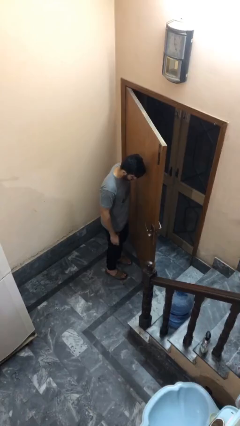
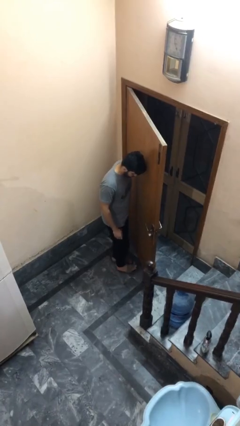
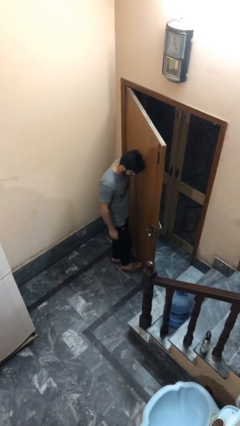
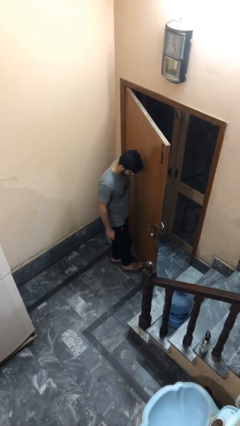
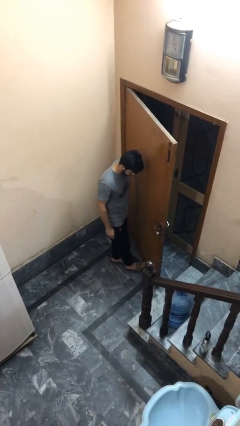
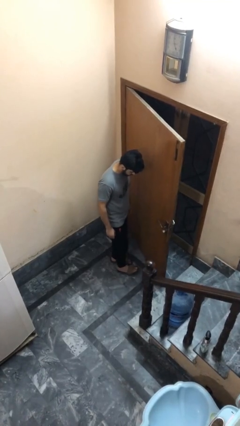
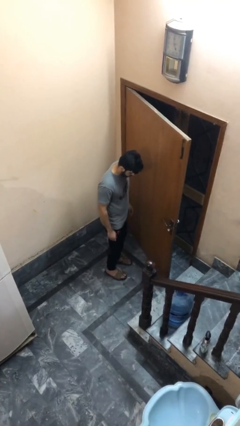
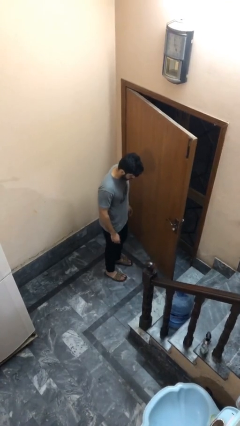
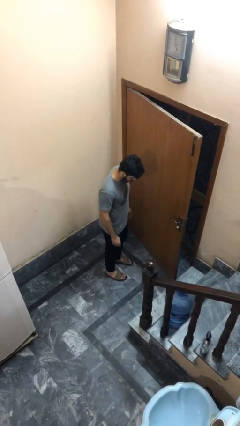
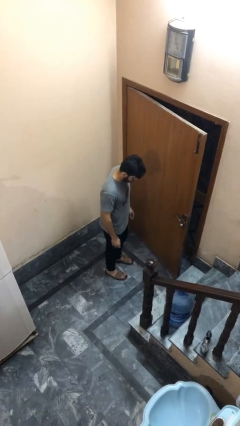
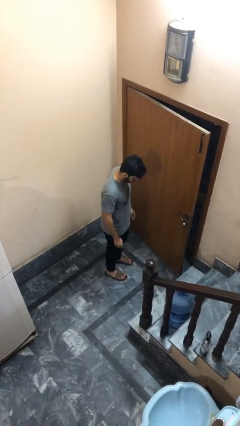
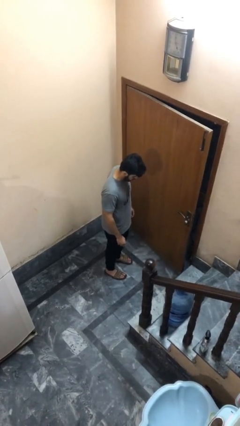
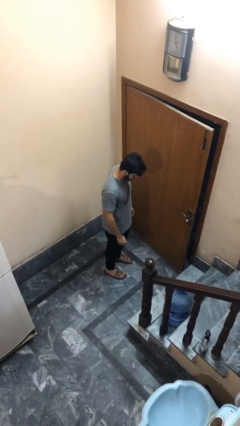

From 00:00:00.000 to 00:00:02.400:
person closes door with foot

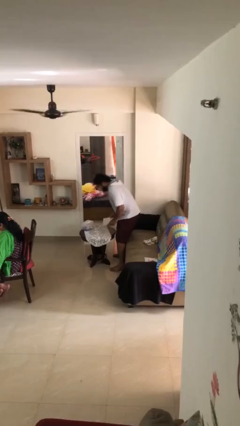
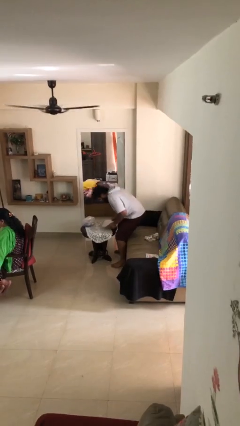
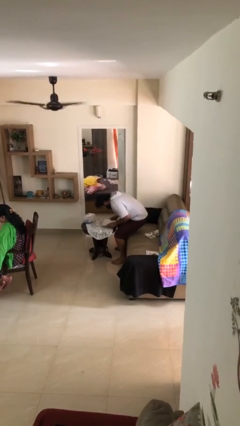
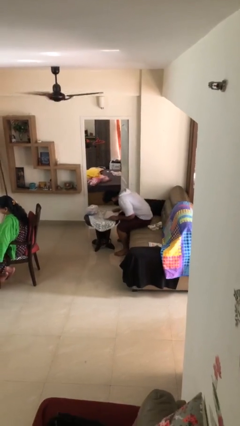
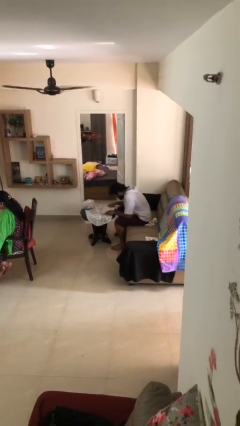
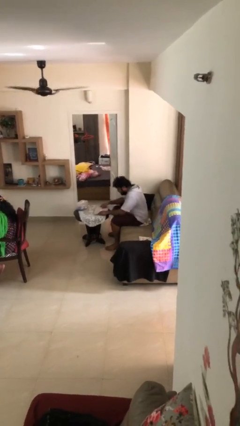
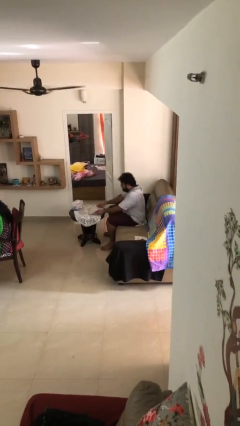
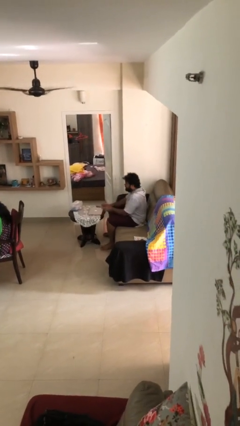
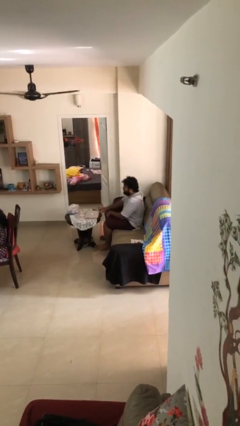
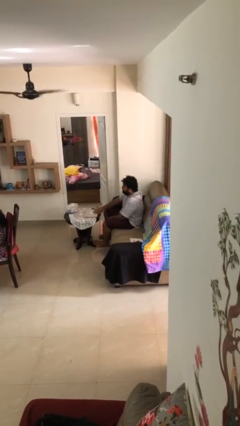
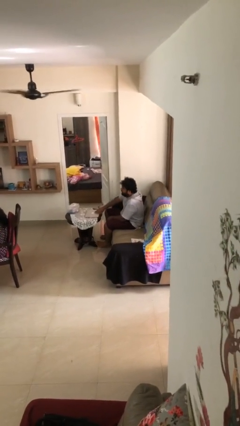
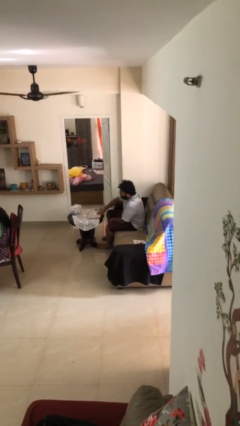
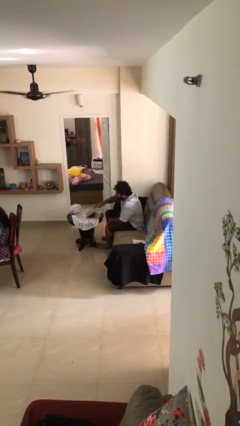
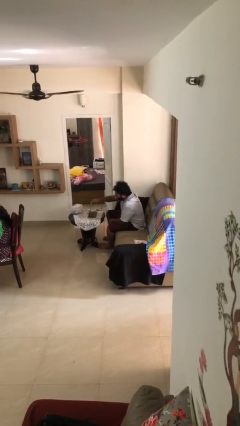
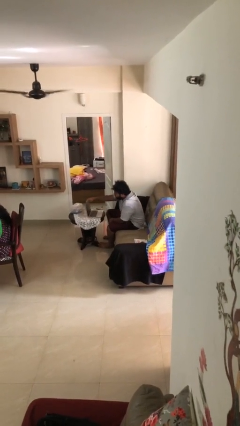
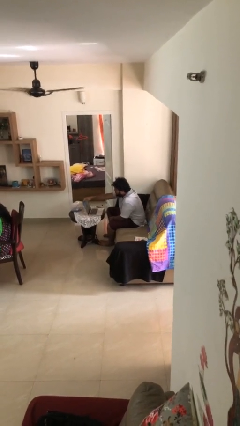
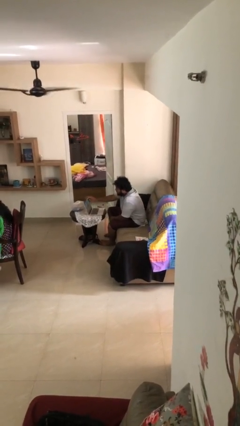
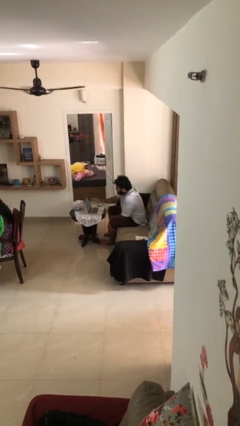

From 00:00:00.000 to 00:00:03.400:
person sits down

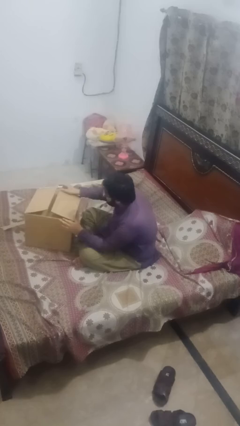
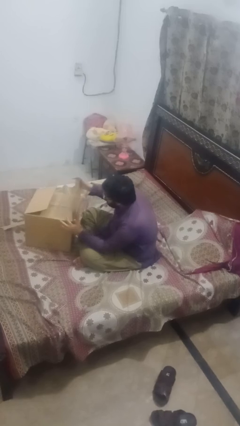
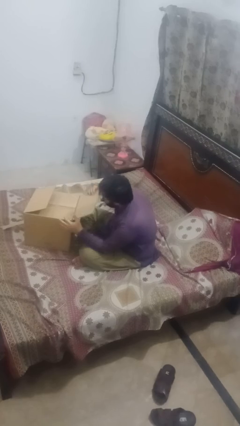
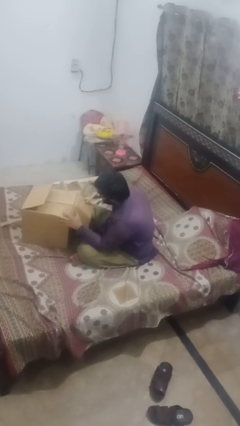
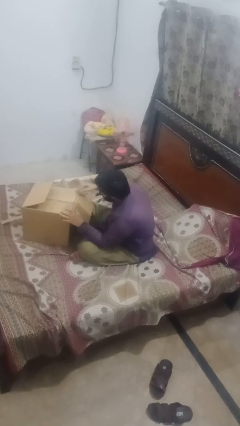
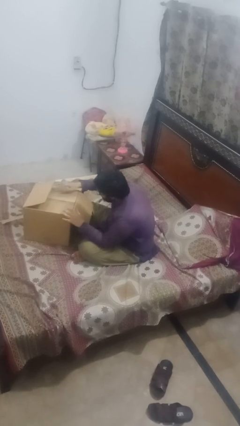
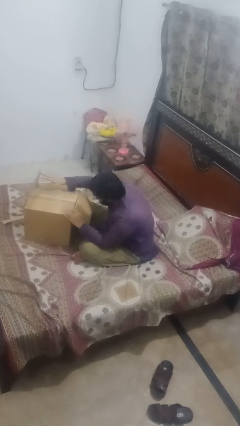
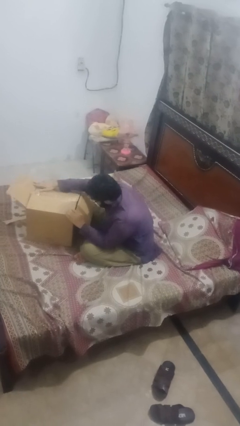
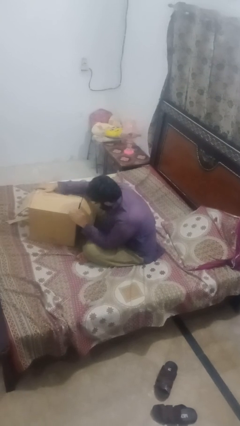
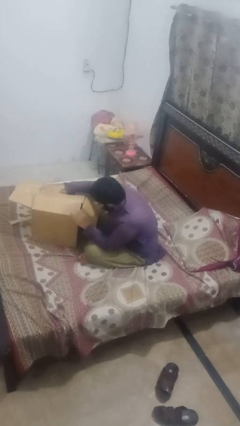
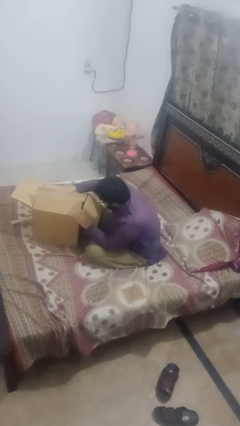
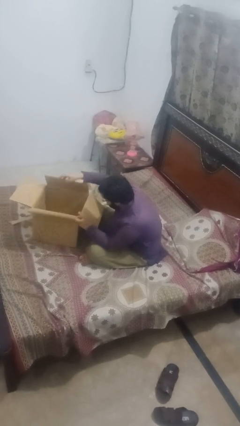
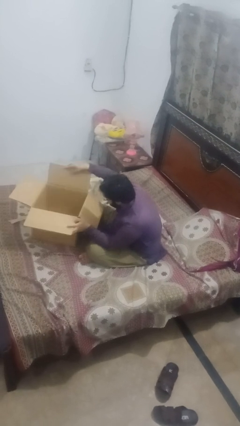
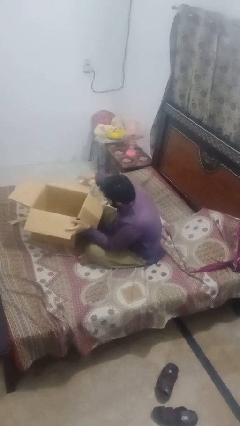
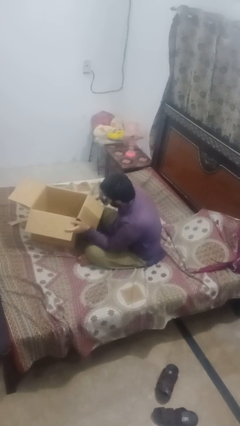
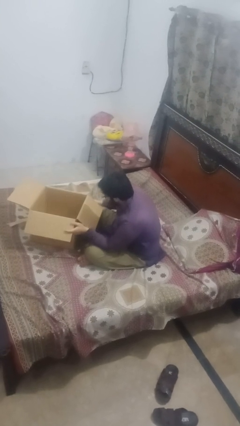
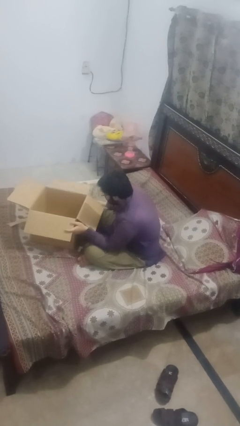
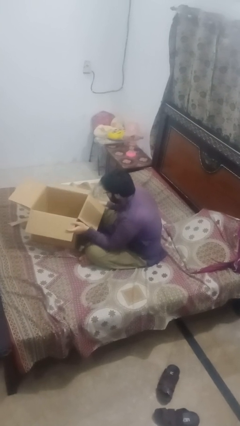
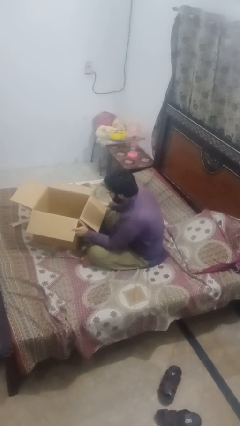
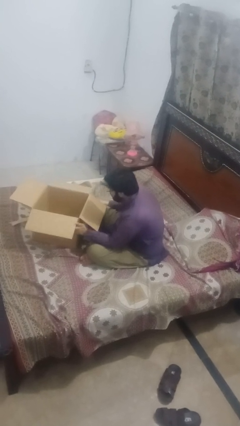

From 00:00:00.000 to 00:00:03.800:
person opens box

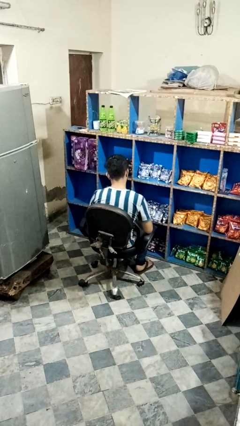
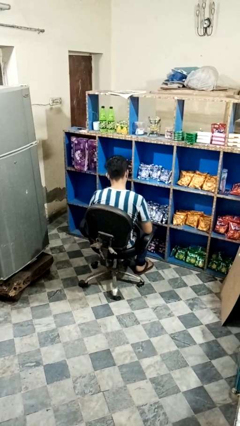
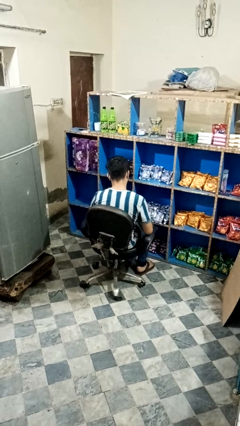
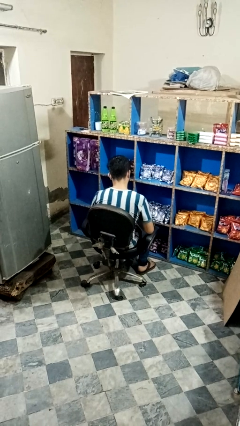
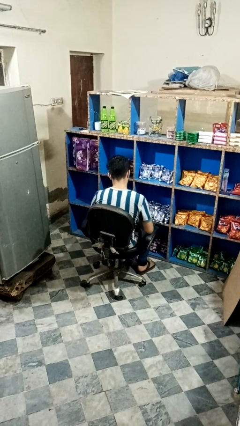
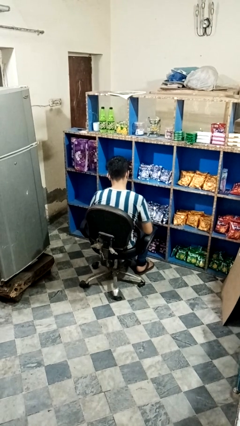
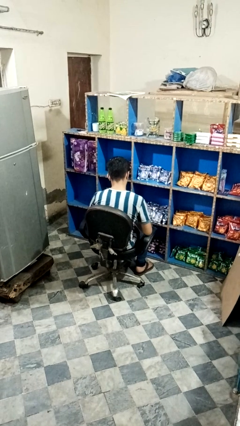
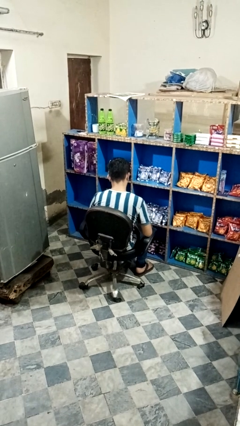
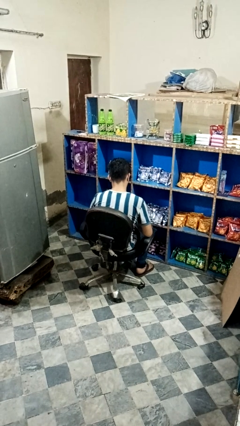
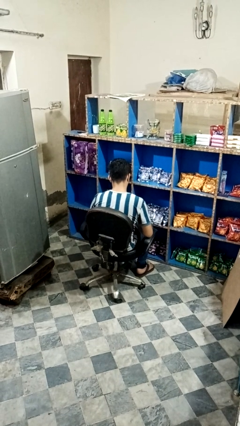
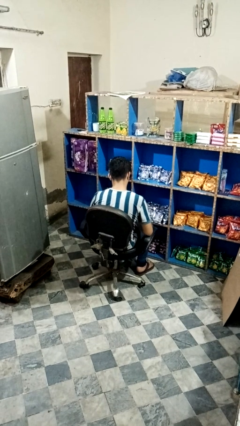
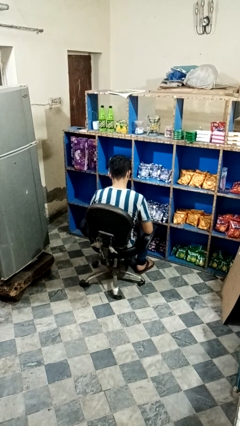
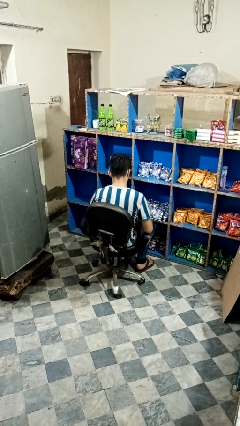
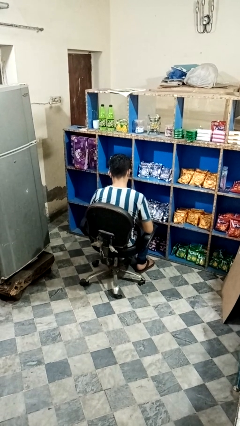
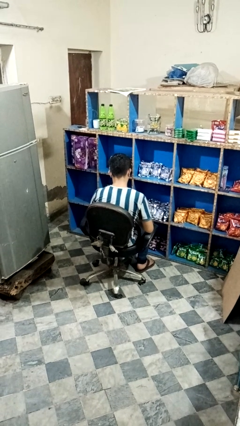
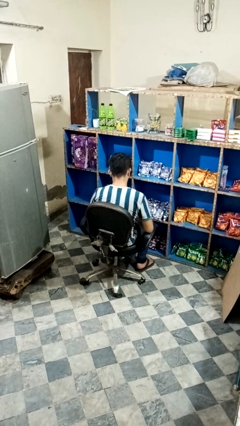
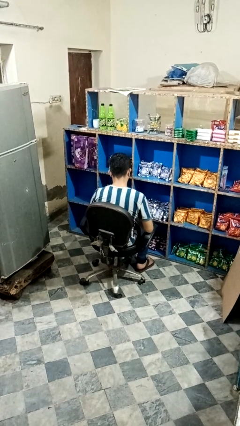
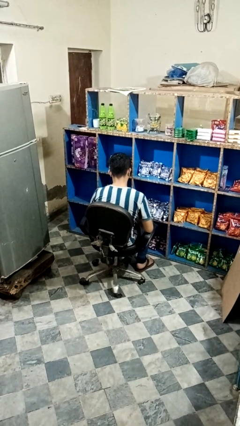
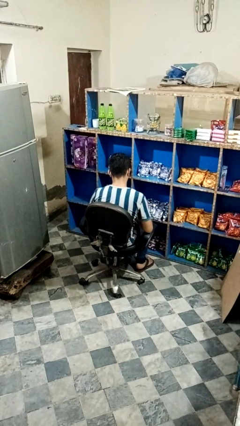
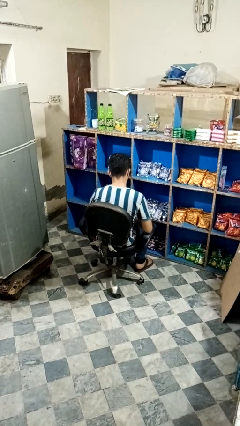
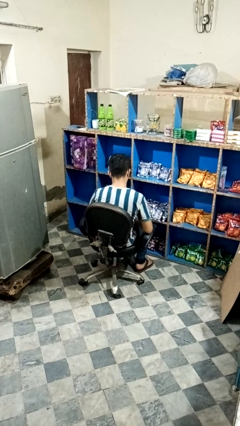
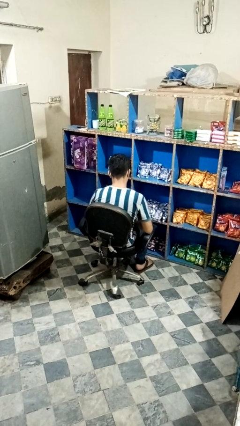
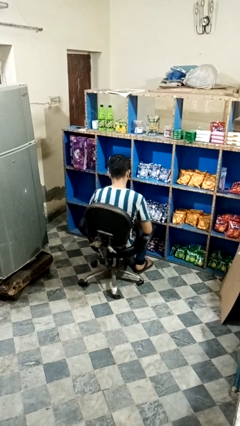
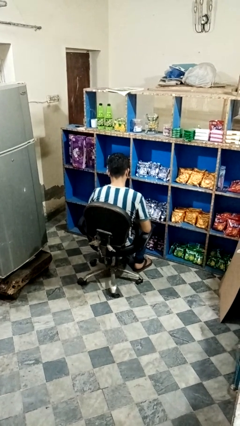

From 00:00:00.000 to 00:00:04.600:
person looks at hands in lap

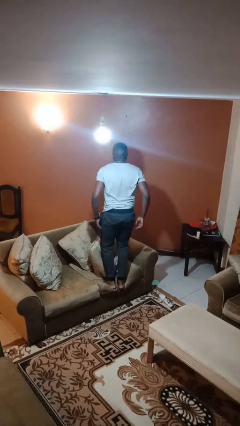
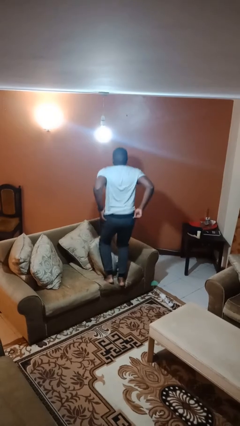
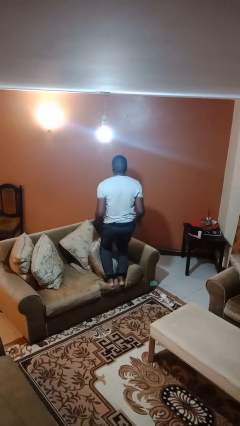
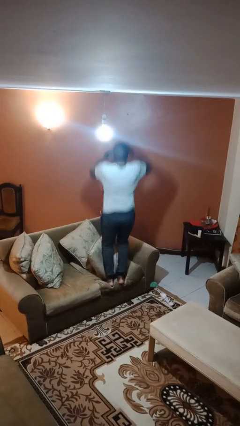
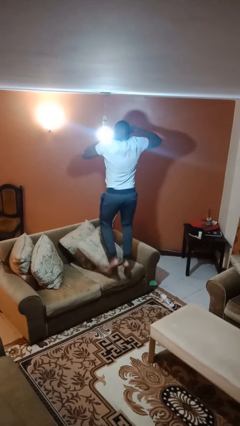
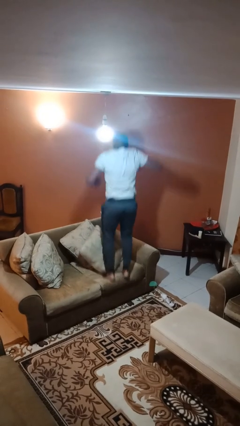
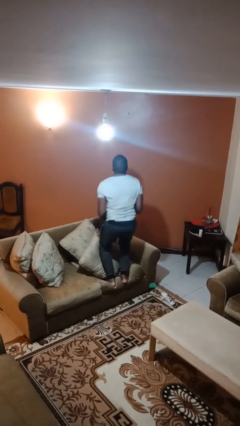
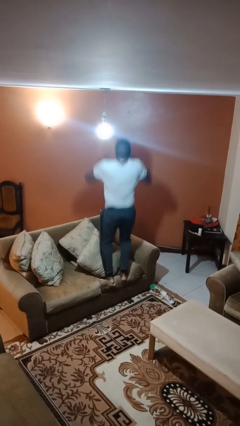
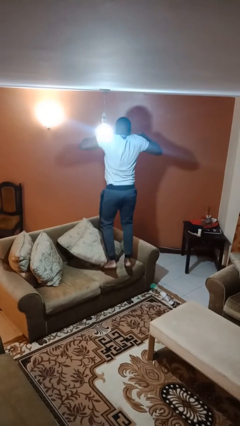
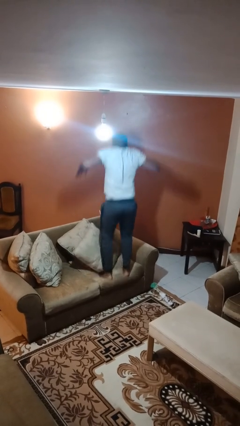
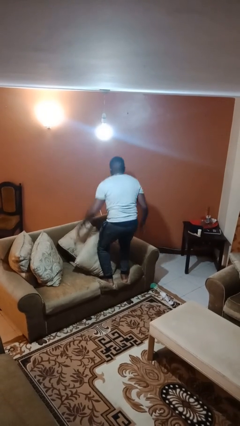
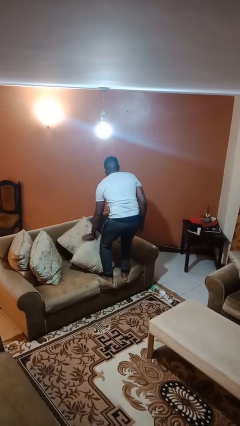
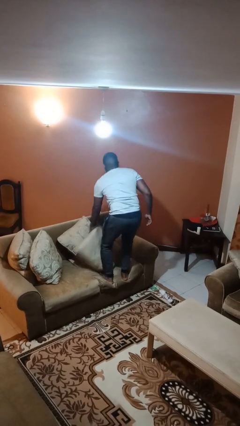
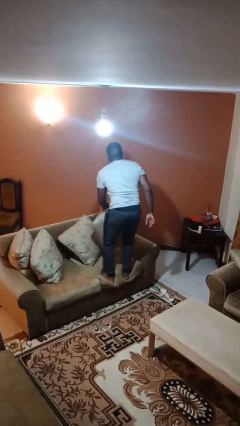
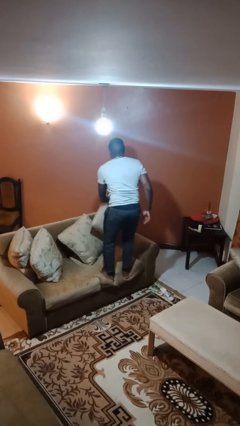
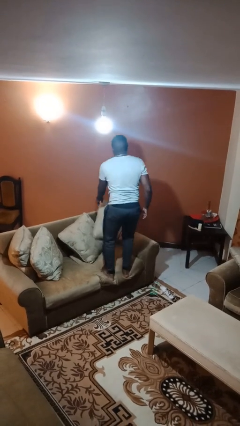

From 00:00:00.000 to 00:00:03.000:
person jumps on couch

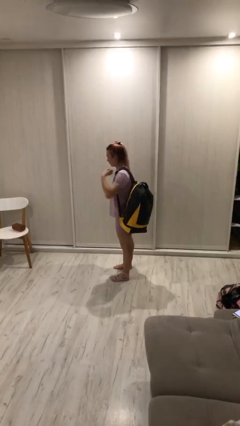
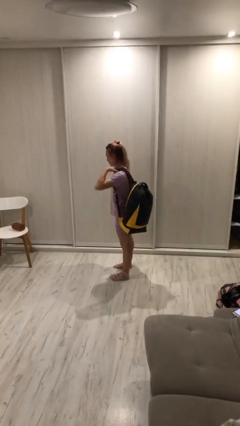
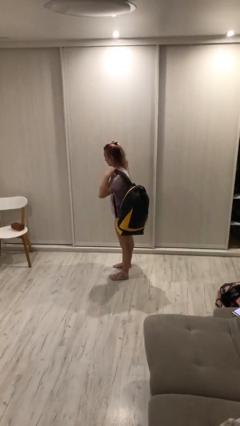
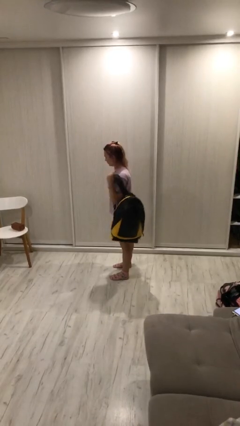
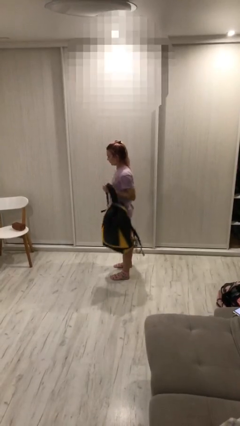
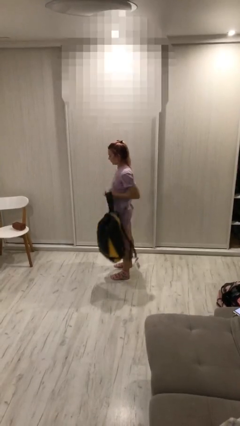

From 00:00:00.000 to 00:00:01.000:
person takes off backpack
